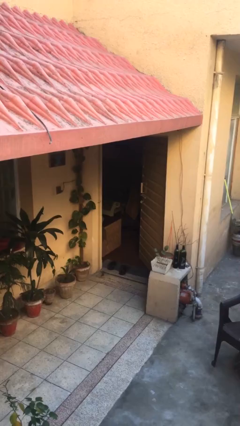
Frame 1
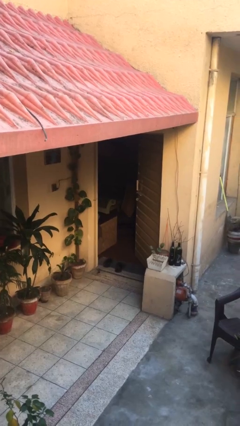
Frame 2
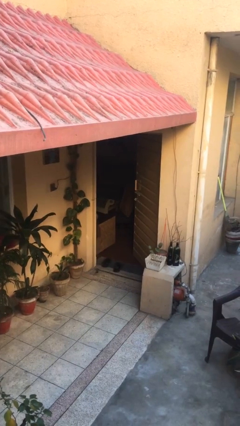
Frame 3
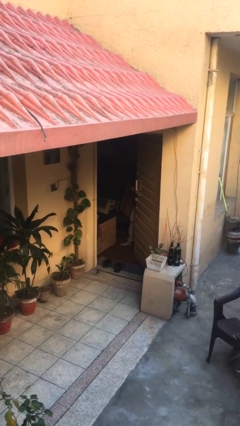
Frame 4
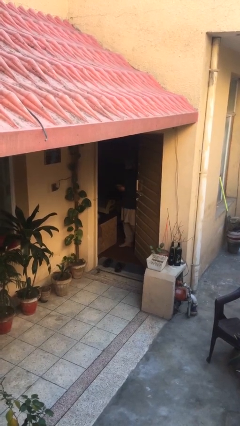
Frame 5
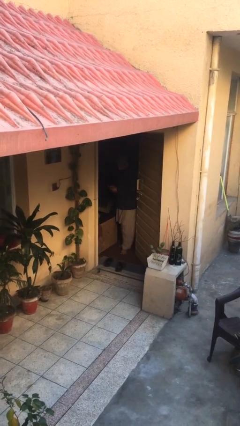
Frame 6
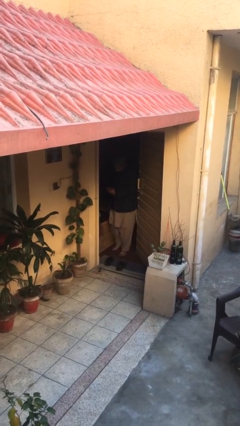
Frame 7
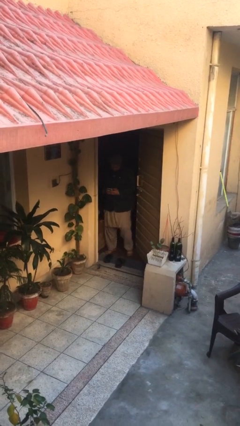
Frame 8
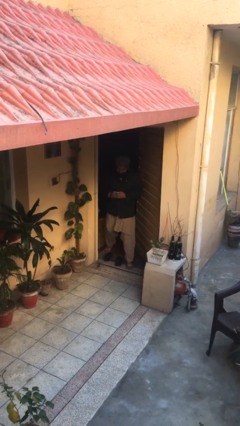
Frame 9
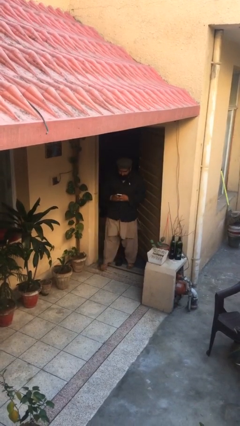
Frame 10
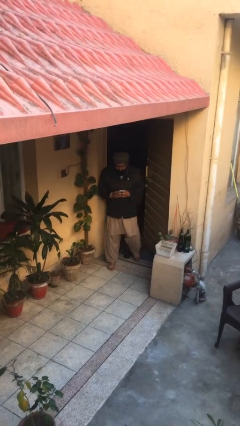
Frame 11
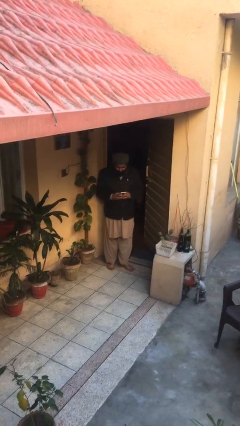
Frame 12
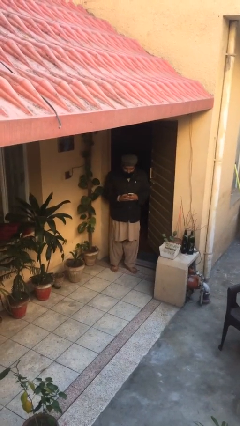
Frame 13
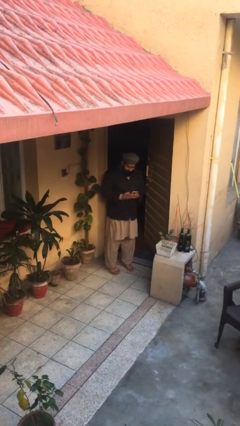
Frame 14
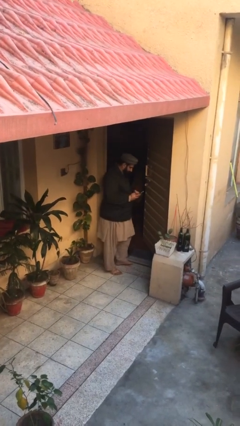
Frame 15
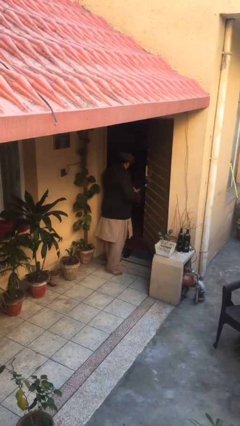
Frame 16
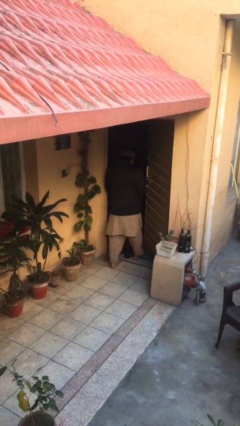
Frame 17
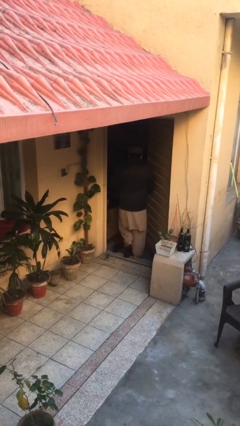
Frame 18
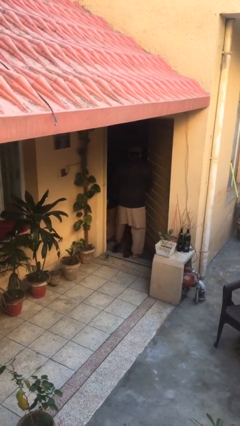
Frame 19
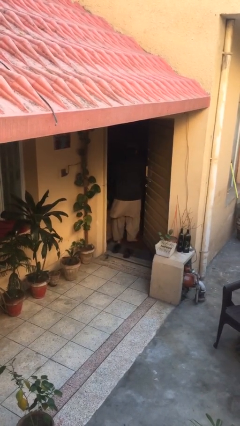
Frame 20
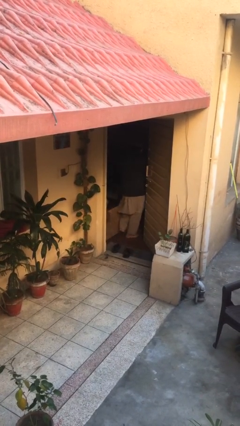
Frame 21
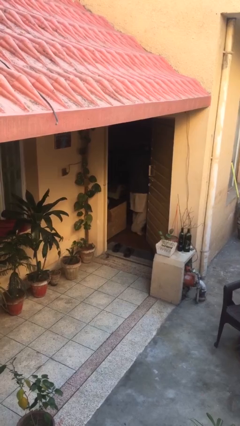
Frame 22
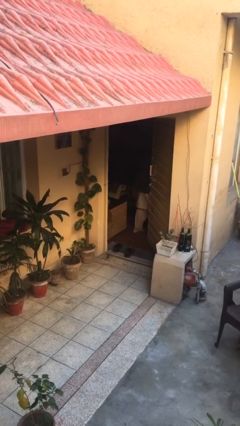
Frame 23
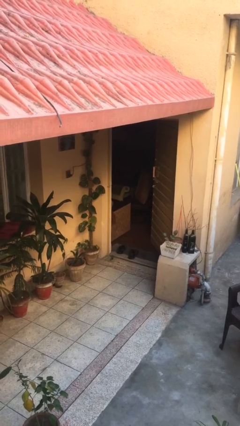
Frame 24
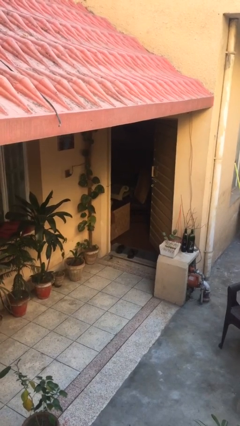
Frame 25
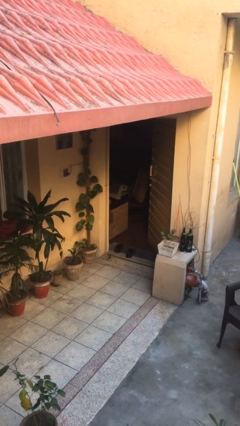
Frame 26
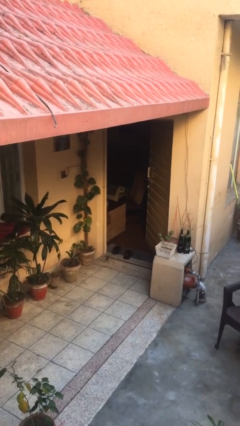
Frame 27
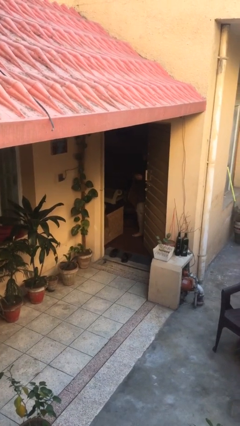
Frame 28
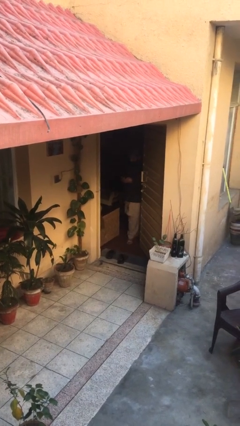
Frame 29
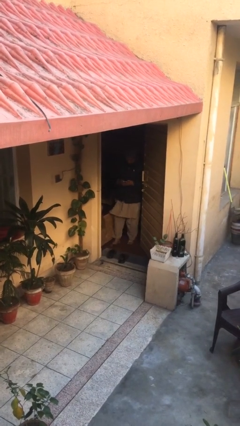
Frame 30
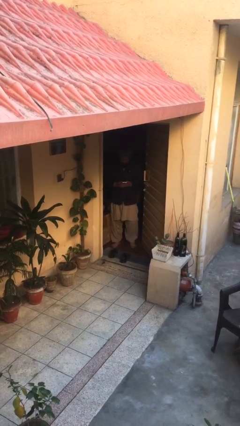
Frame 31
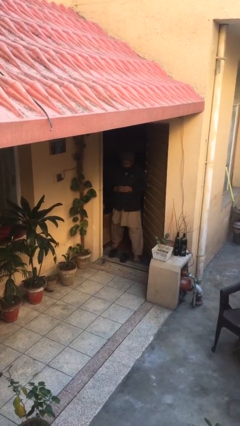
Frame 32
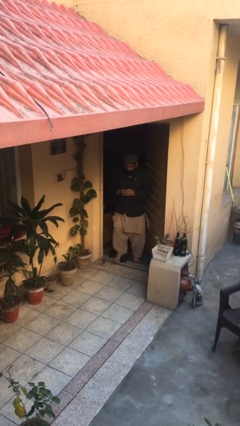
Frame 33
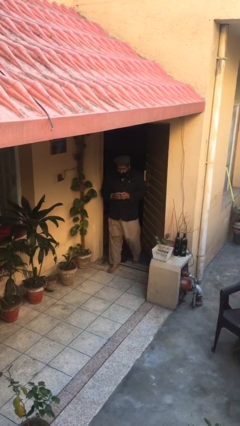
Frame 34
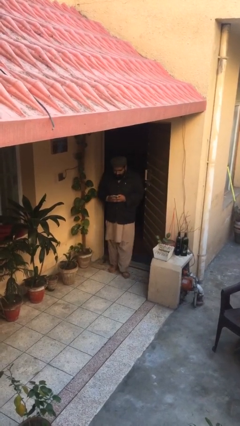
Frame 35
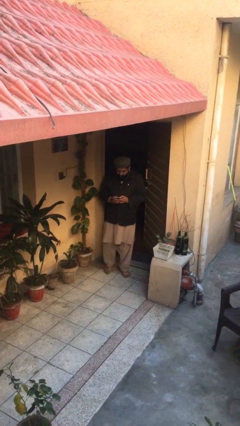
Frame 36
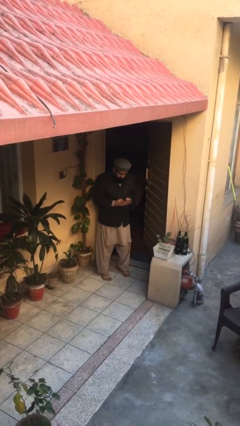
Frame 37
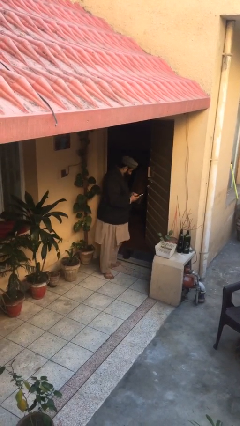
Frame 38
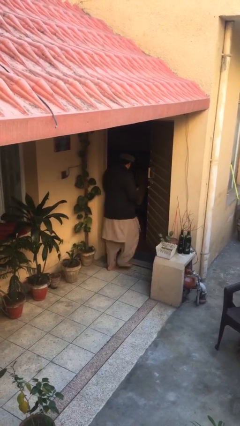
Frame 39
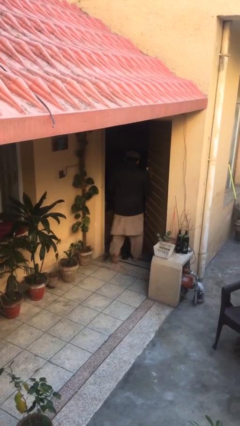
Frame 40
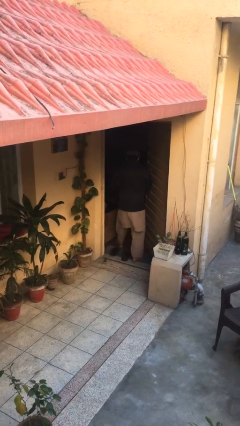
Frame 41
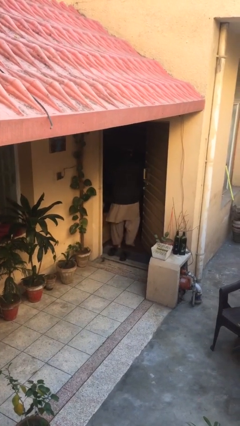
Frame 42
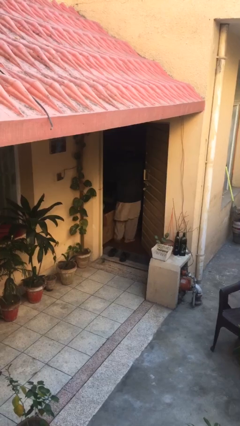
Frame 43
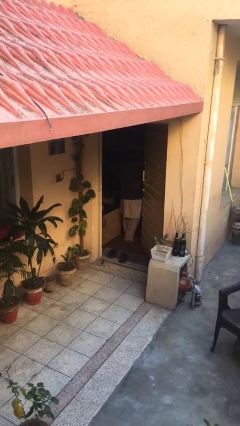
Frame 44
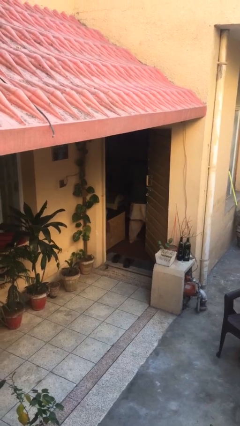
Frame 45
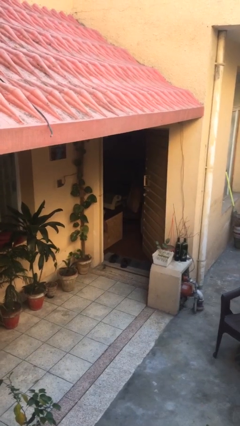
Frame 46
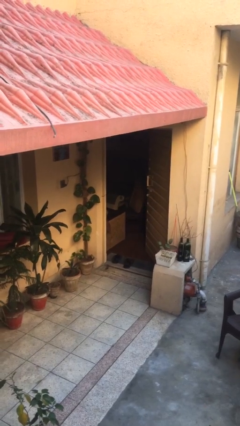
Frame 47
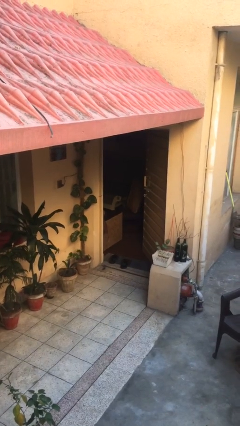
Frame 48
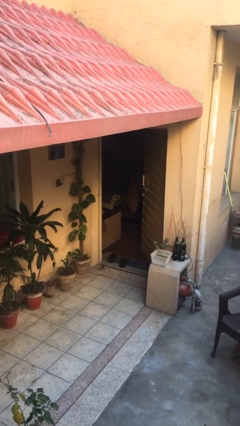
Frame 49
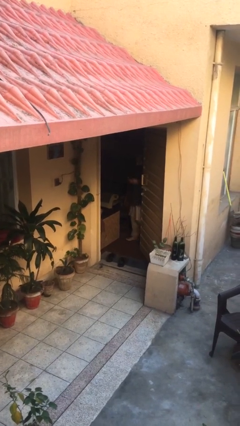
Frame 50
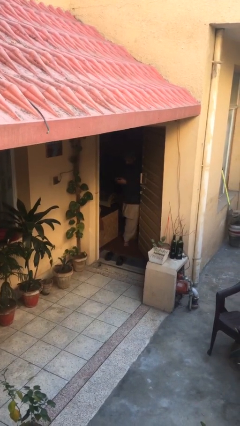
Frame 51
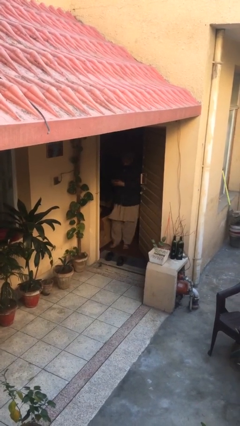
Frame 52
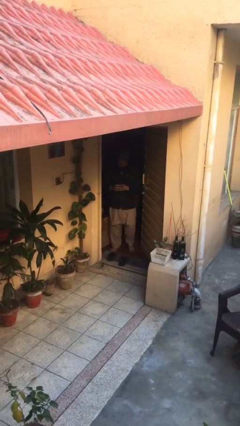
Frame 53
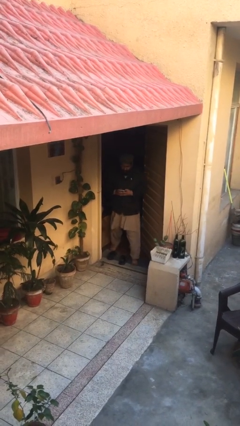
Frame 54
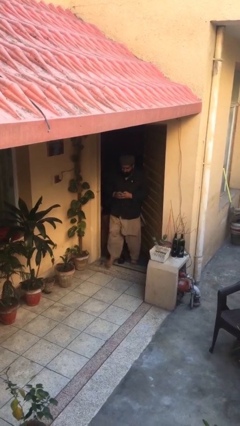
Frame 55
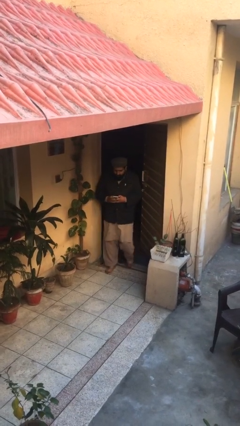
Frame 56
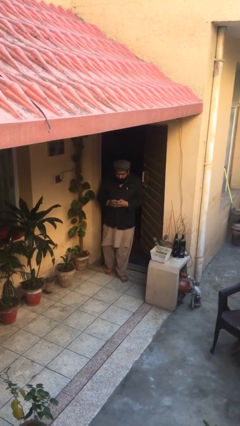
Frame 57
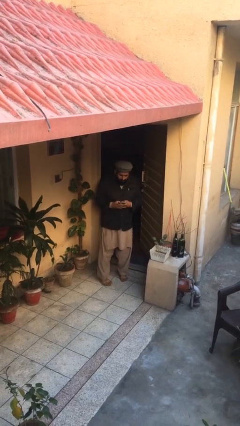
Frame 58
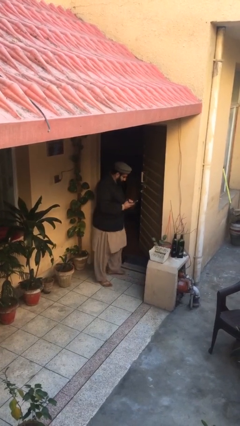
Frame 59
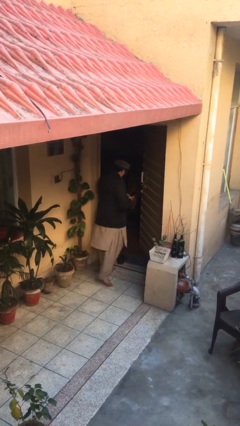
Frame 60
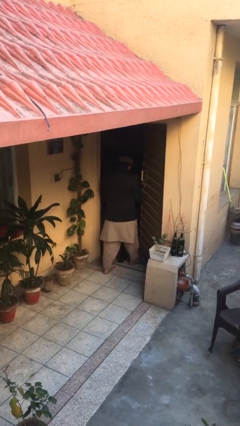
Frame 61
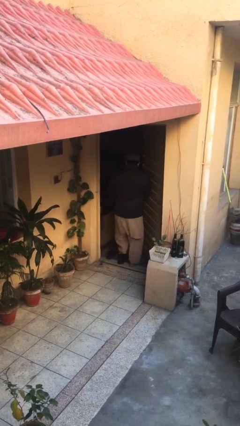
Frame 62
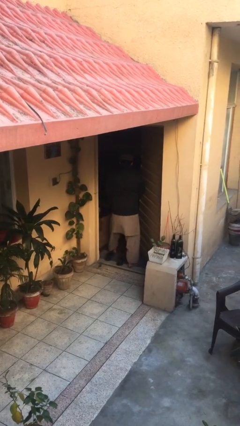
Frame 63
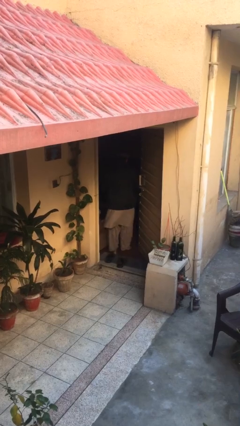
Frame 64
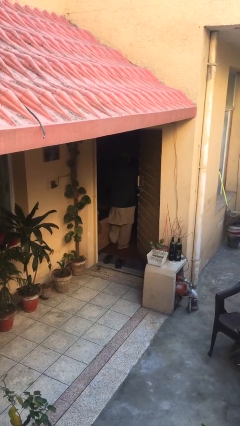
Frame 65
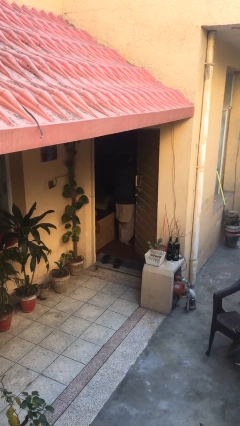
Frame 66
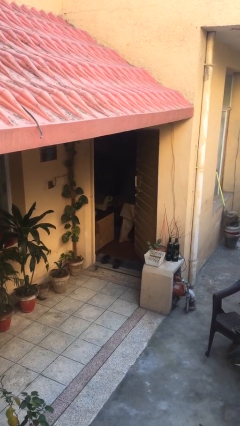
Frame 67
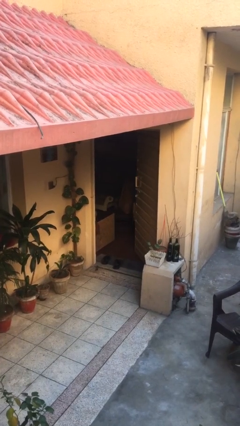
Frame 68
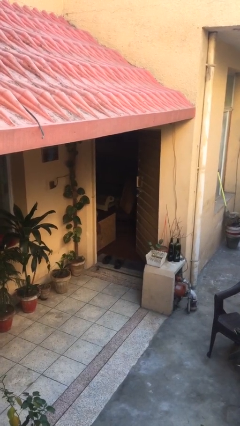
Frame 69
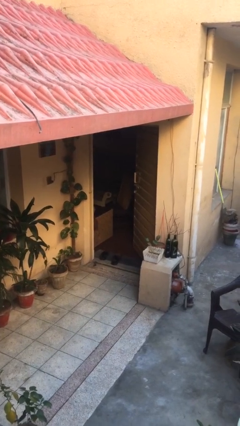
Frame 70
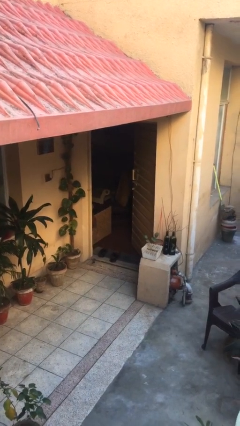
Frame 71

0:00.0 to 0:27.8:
person texts on phone

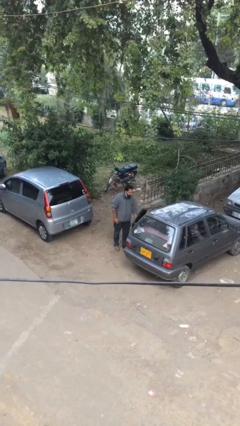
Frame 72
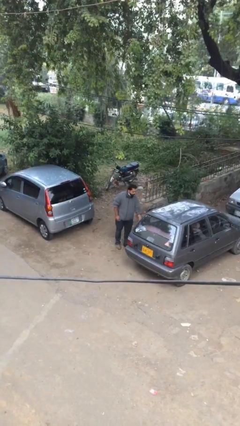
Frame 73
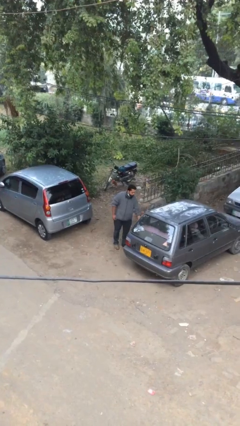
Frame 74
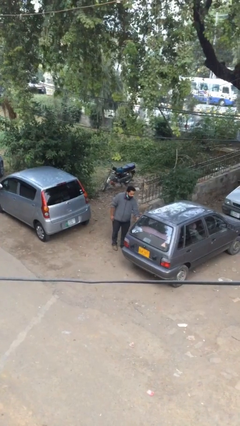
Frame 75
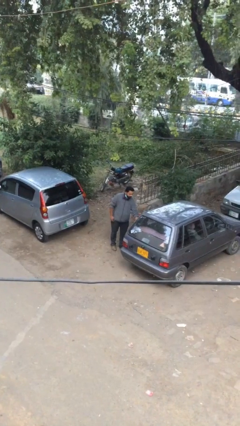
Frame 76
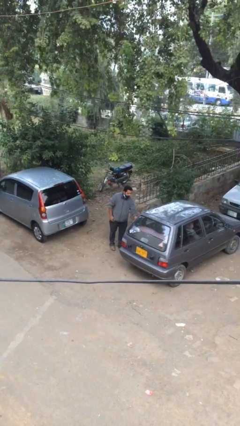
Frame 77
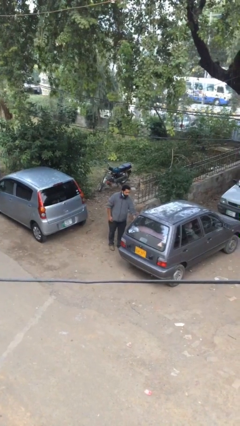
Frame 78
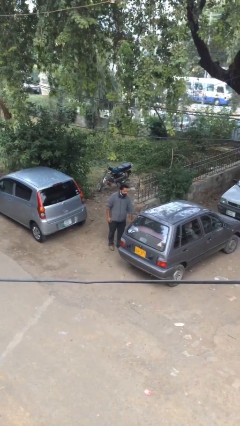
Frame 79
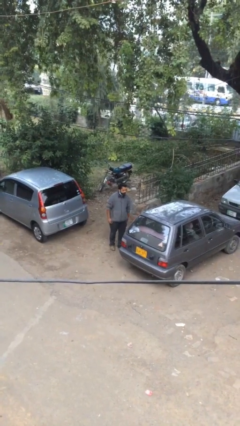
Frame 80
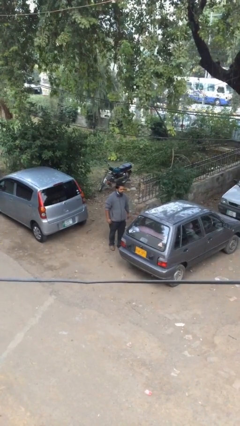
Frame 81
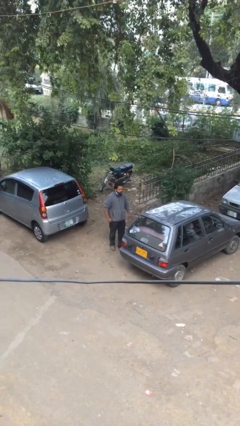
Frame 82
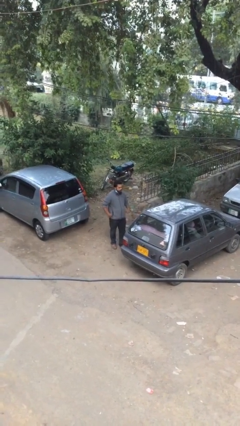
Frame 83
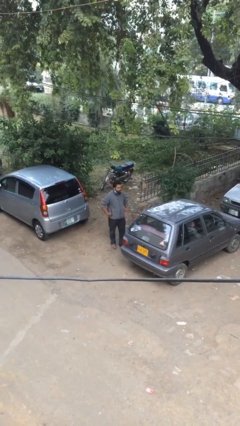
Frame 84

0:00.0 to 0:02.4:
person closes car door

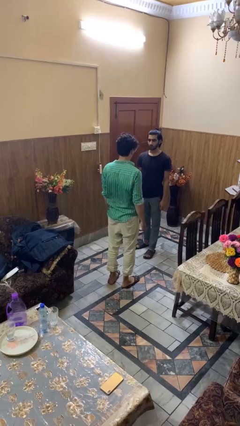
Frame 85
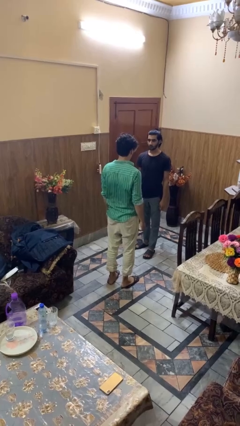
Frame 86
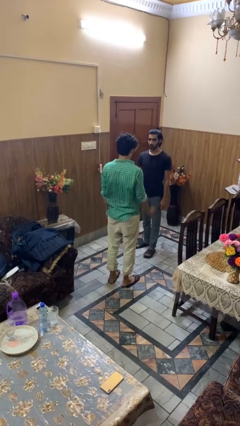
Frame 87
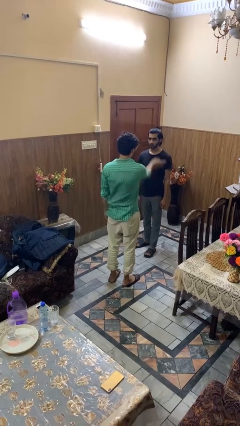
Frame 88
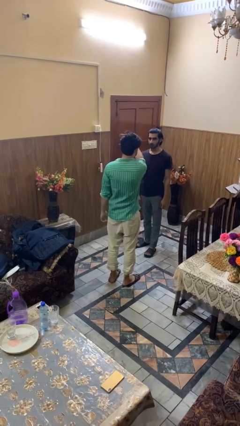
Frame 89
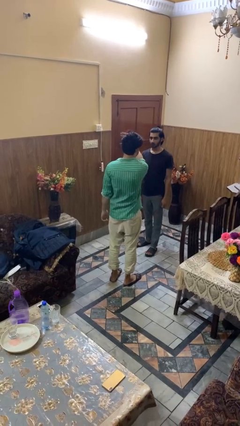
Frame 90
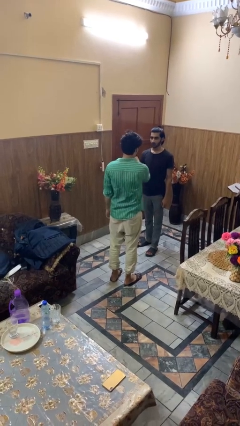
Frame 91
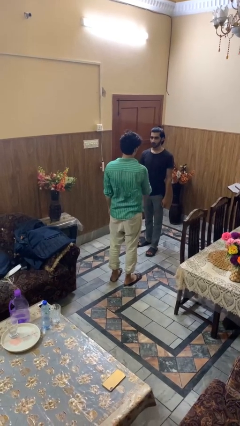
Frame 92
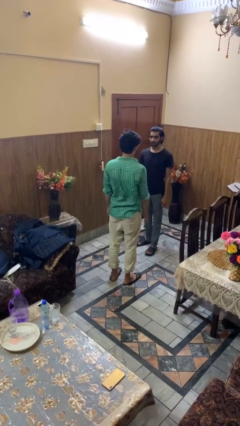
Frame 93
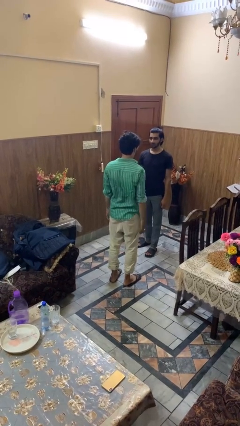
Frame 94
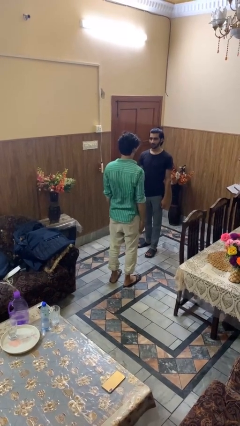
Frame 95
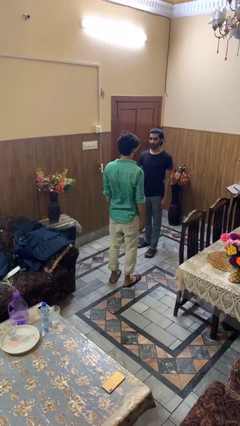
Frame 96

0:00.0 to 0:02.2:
person shoves person
